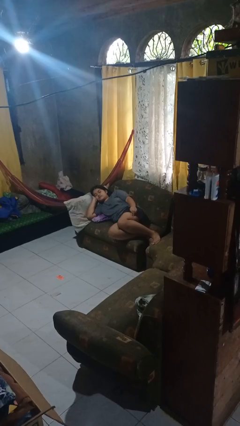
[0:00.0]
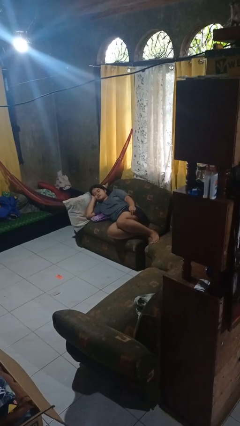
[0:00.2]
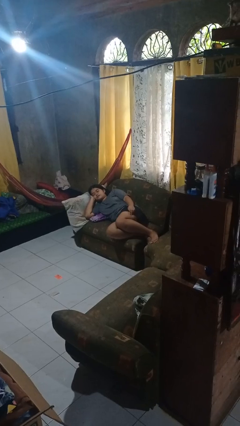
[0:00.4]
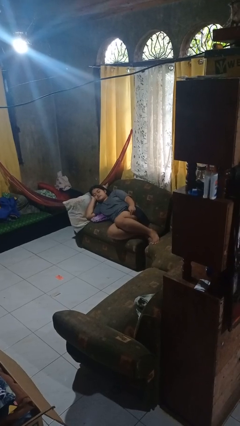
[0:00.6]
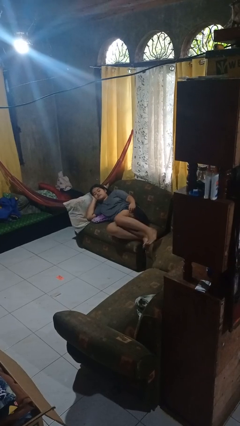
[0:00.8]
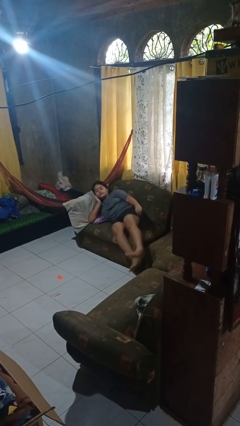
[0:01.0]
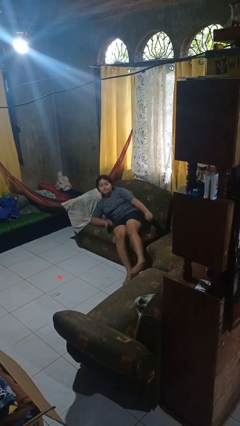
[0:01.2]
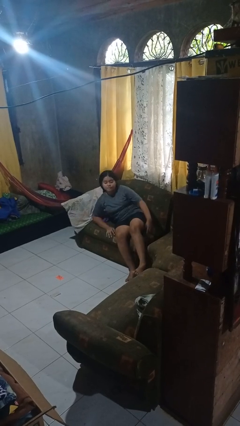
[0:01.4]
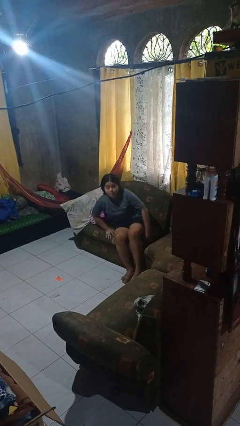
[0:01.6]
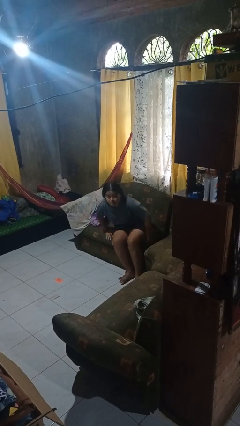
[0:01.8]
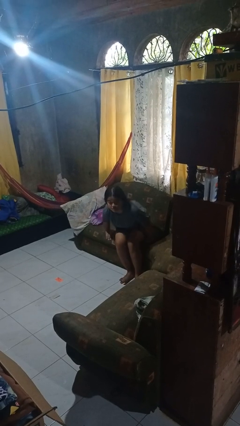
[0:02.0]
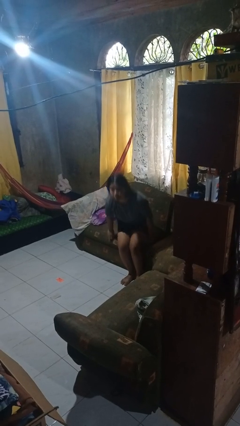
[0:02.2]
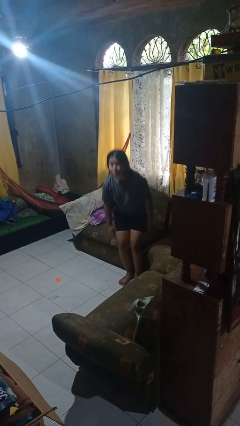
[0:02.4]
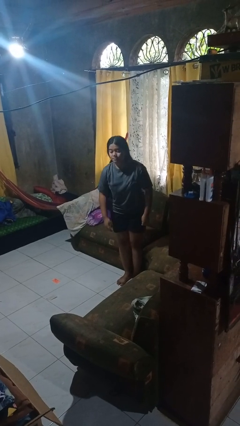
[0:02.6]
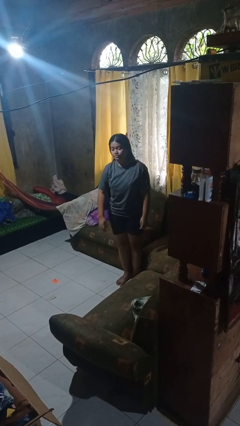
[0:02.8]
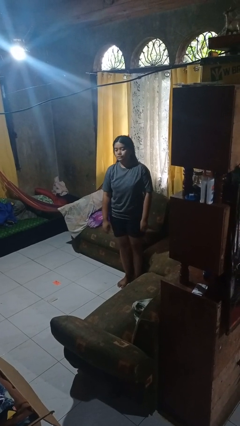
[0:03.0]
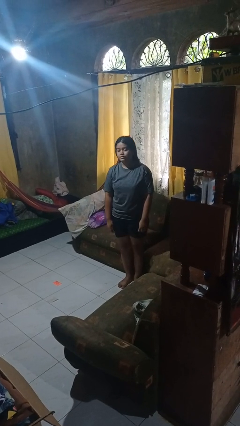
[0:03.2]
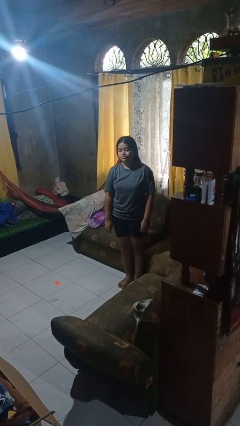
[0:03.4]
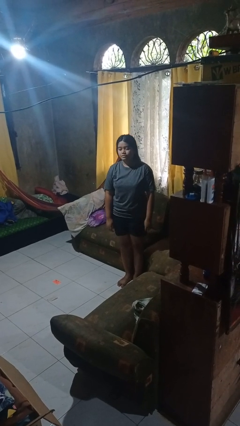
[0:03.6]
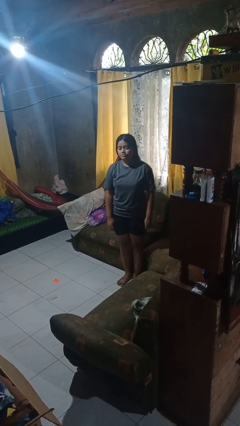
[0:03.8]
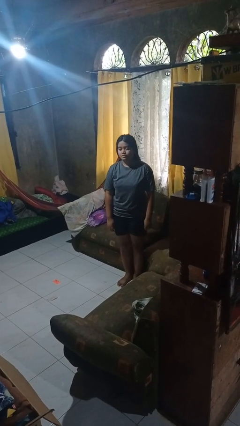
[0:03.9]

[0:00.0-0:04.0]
person stands up

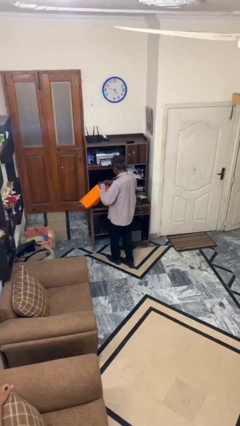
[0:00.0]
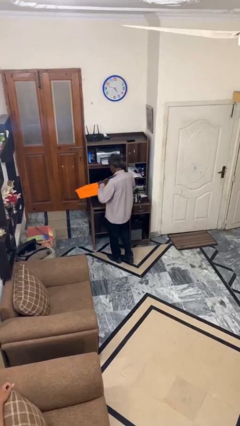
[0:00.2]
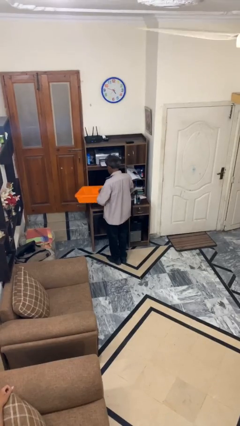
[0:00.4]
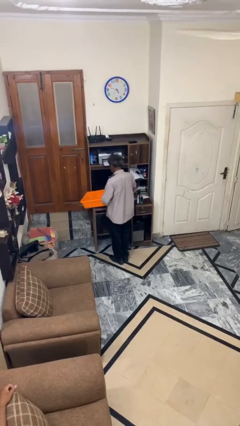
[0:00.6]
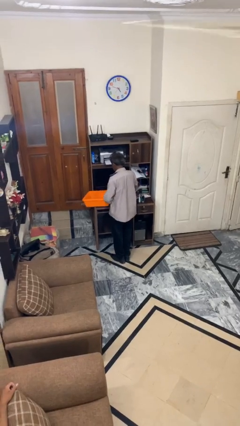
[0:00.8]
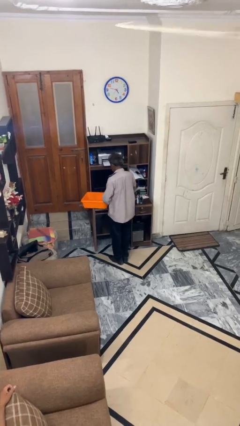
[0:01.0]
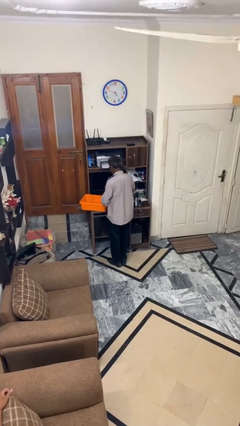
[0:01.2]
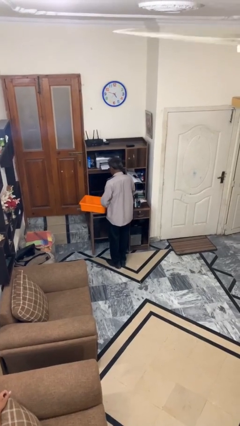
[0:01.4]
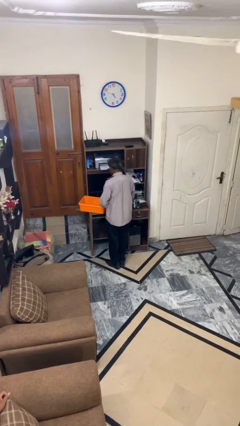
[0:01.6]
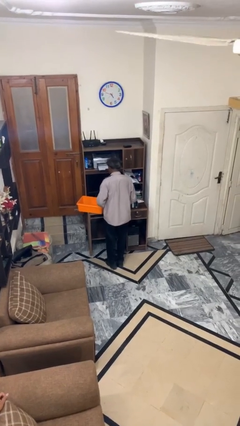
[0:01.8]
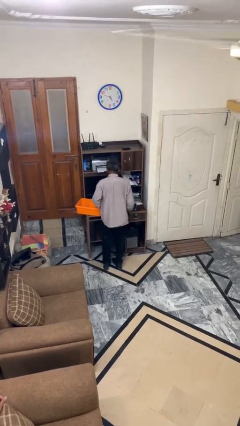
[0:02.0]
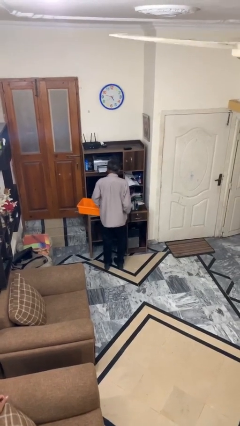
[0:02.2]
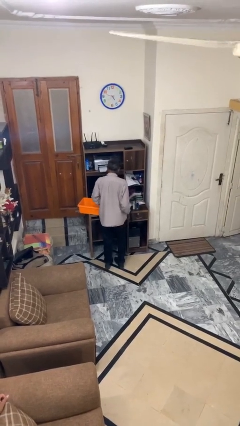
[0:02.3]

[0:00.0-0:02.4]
person puts down object on table

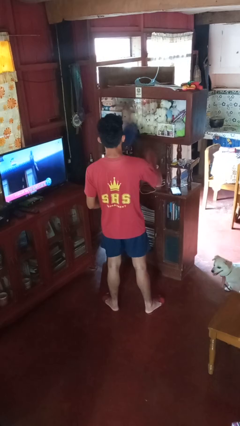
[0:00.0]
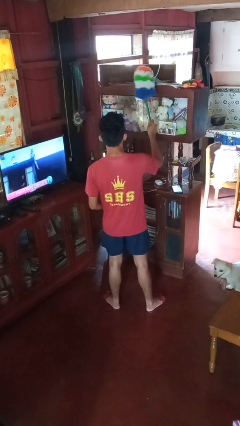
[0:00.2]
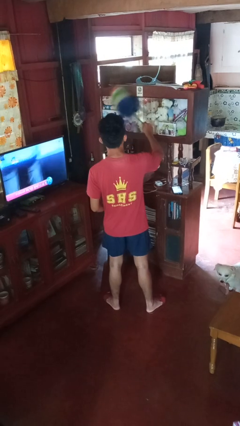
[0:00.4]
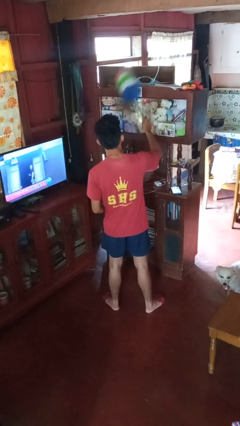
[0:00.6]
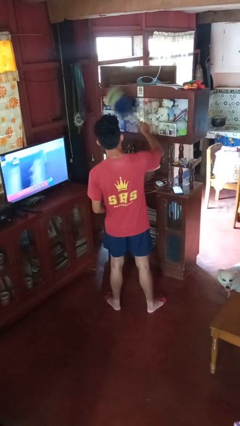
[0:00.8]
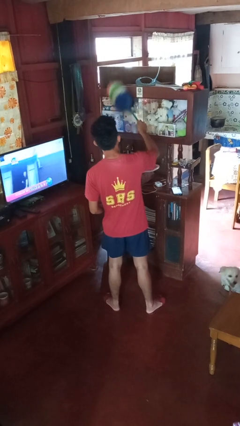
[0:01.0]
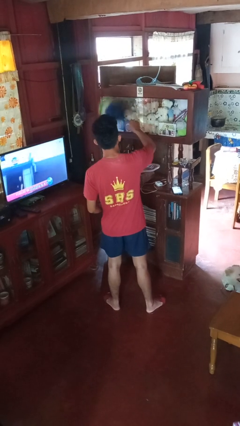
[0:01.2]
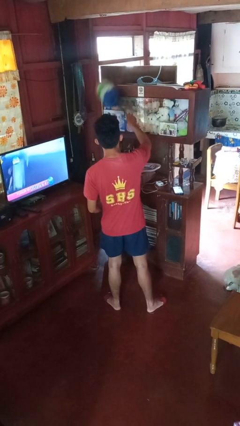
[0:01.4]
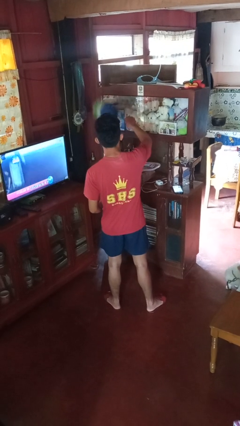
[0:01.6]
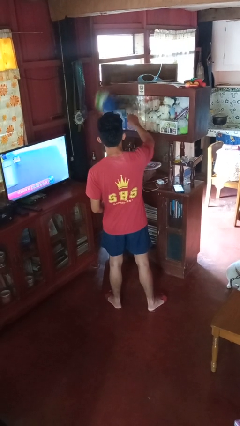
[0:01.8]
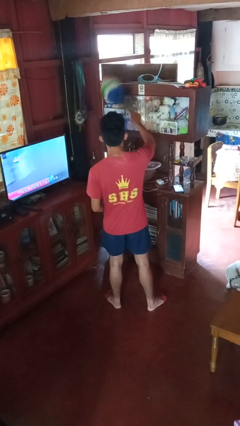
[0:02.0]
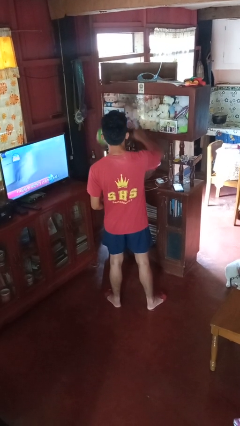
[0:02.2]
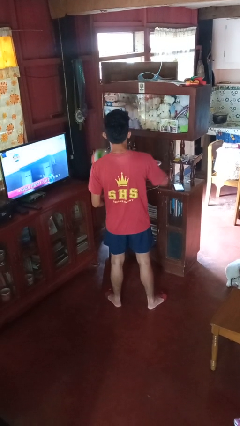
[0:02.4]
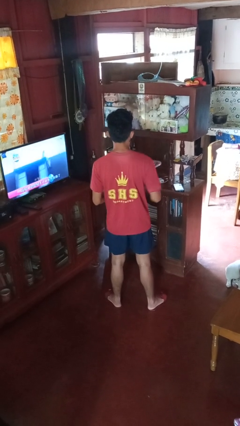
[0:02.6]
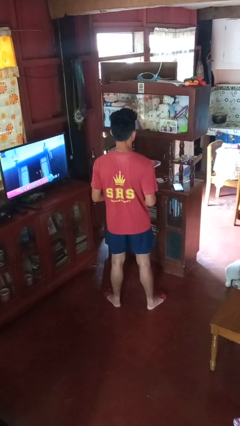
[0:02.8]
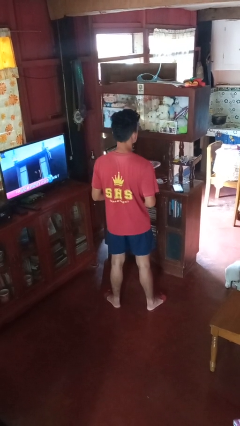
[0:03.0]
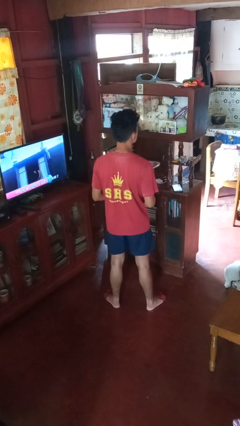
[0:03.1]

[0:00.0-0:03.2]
person dusts furniture

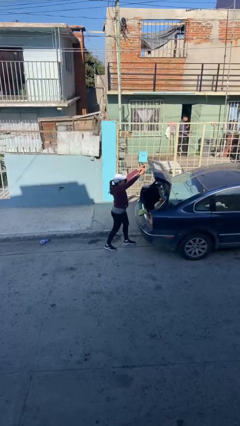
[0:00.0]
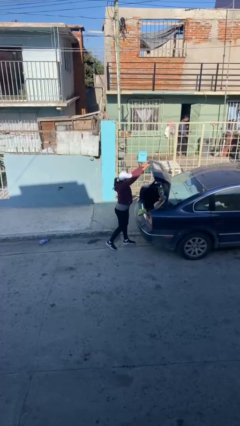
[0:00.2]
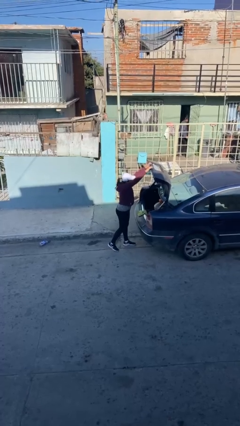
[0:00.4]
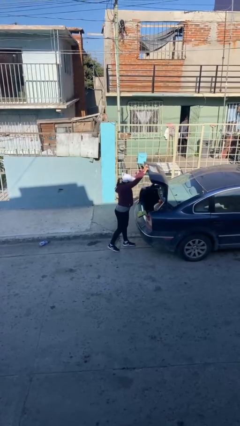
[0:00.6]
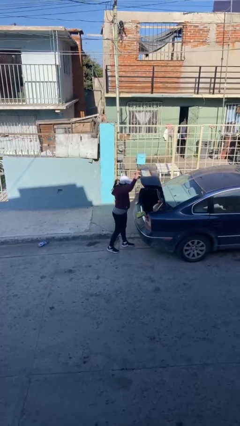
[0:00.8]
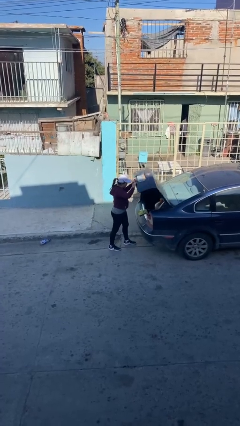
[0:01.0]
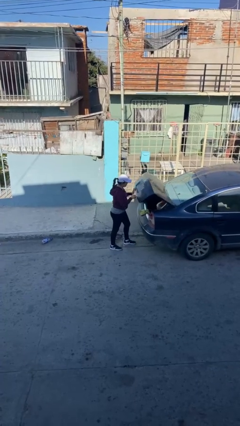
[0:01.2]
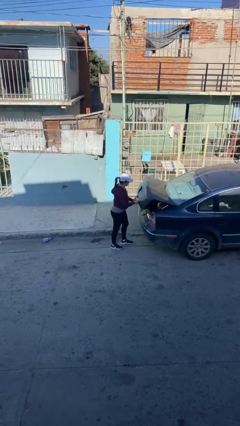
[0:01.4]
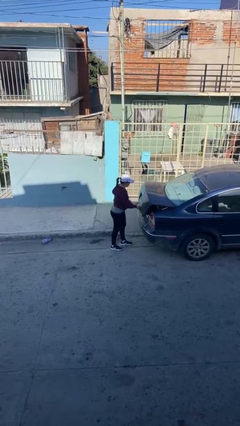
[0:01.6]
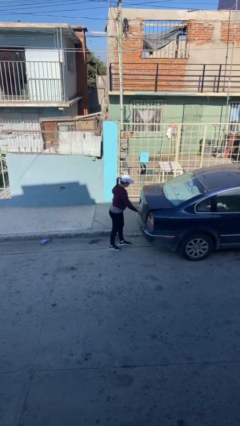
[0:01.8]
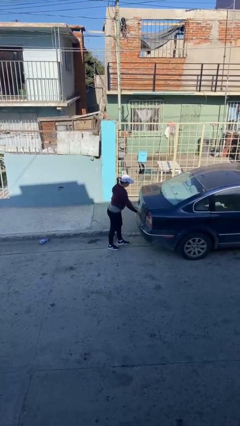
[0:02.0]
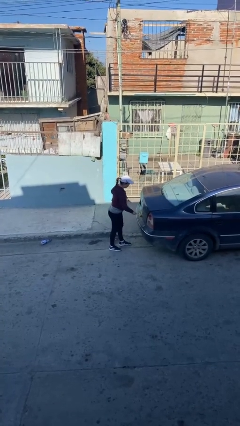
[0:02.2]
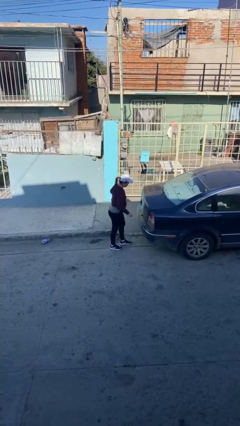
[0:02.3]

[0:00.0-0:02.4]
person closes car trunk

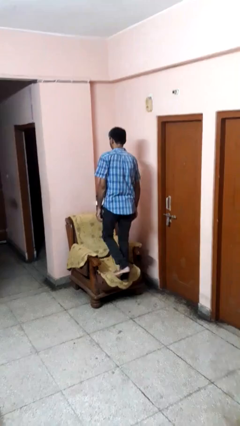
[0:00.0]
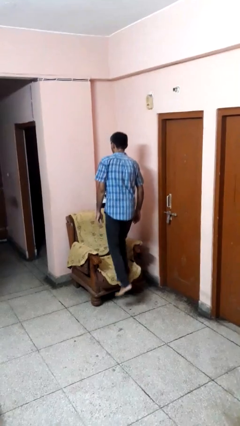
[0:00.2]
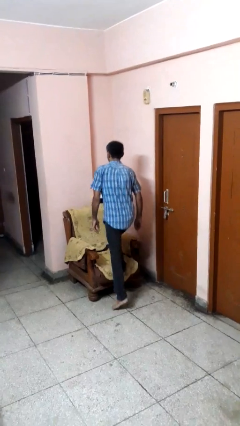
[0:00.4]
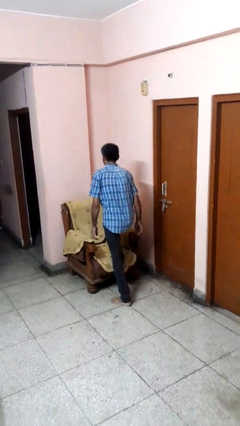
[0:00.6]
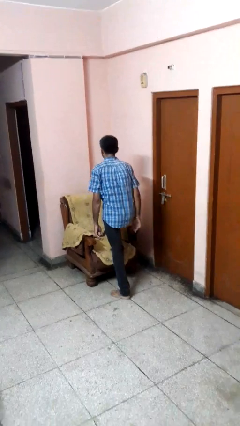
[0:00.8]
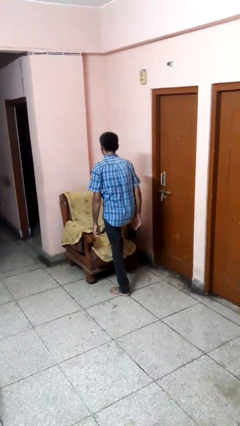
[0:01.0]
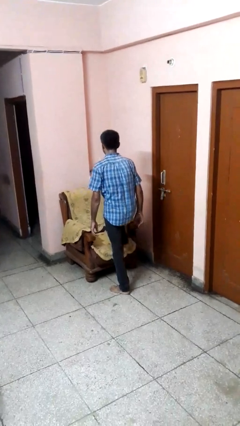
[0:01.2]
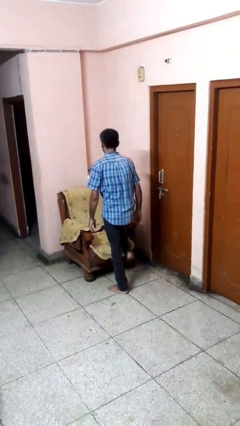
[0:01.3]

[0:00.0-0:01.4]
person climbs off couch

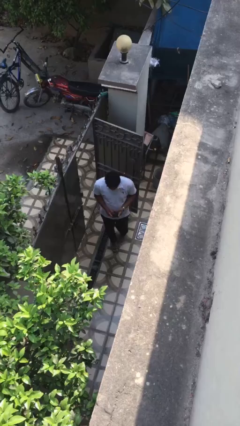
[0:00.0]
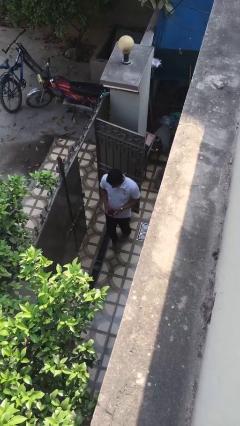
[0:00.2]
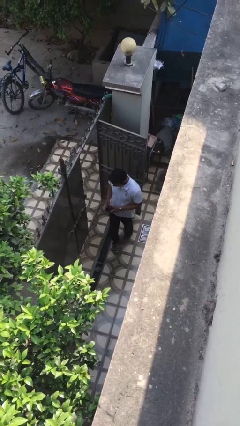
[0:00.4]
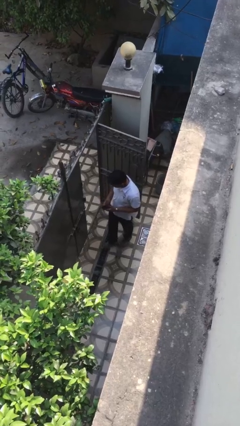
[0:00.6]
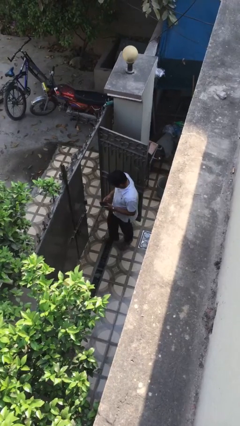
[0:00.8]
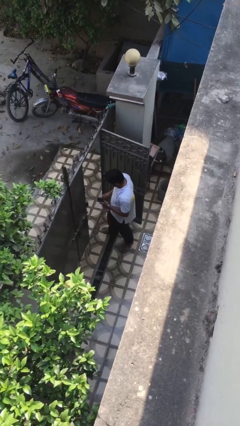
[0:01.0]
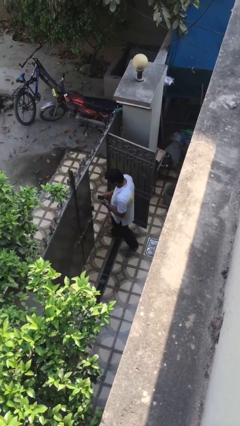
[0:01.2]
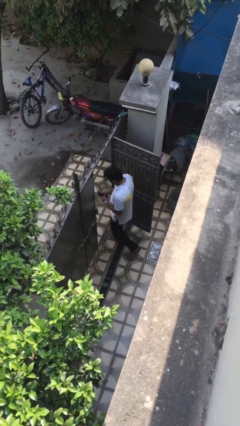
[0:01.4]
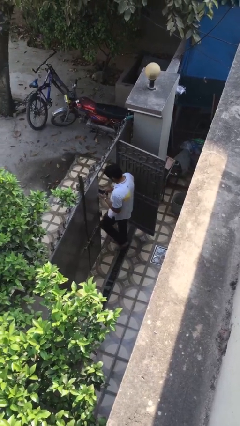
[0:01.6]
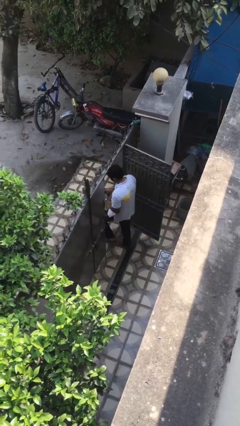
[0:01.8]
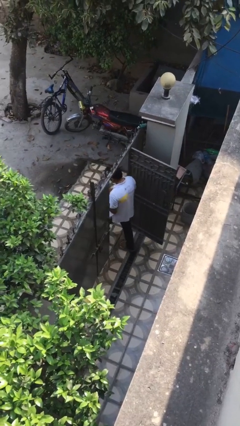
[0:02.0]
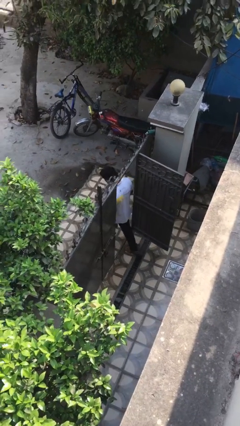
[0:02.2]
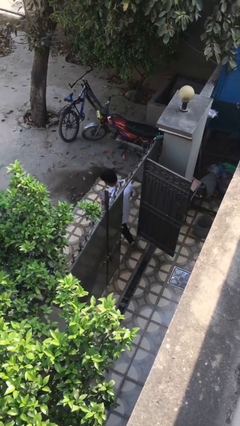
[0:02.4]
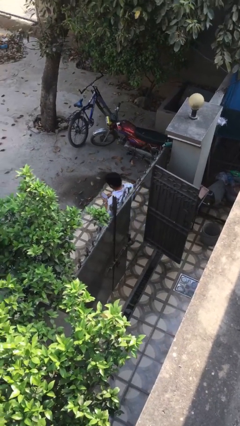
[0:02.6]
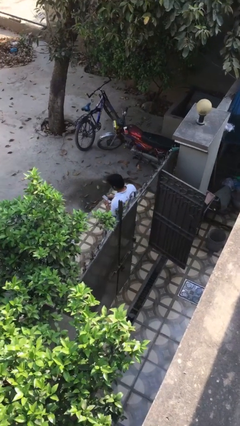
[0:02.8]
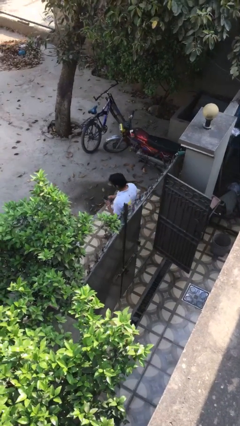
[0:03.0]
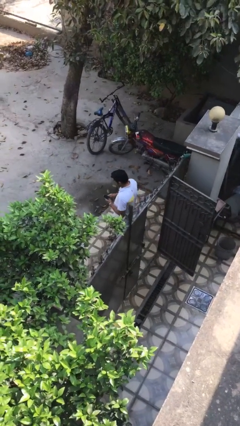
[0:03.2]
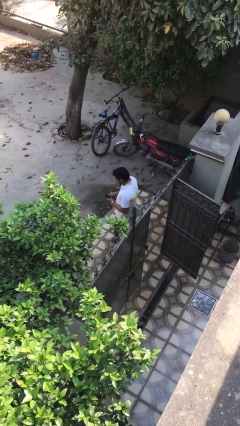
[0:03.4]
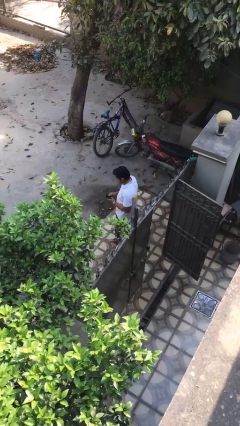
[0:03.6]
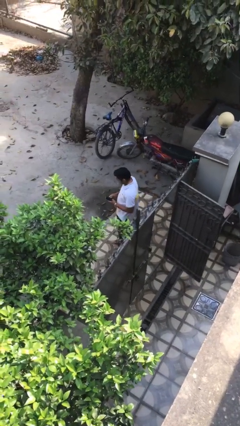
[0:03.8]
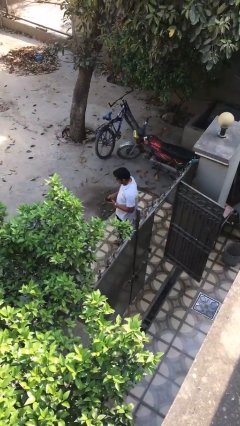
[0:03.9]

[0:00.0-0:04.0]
person exits scene through structure
